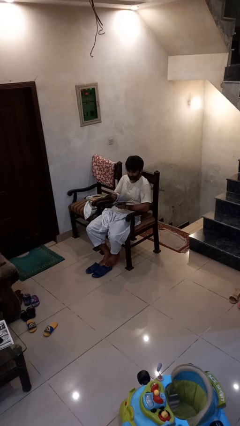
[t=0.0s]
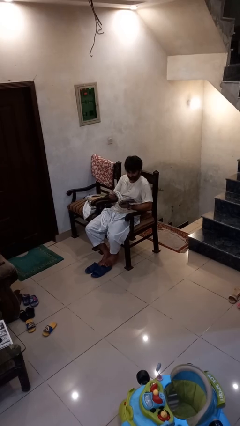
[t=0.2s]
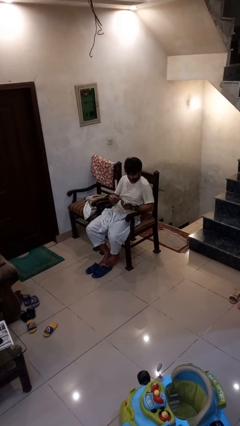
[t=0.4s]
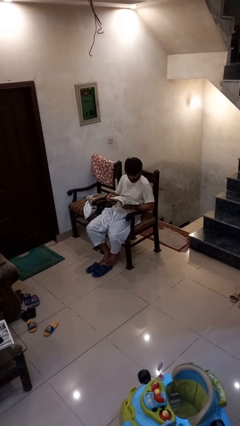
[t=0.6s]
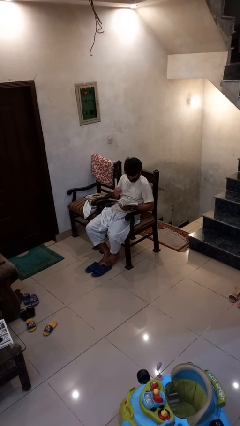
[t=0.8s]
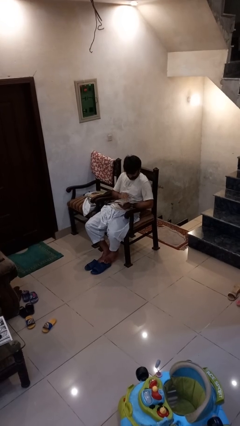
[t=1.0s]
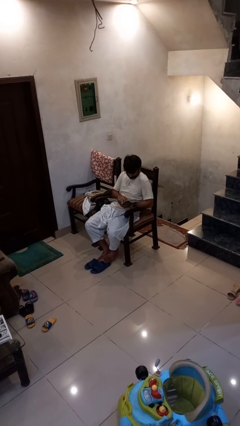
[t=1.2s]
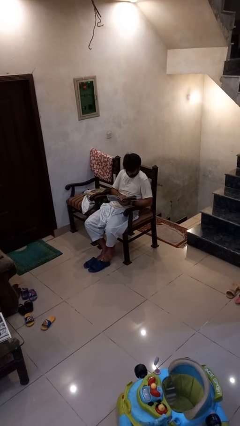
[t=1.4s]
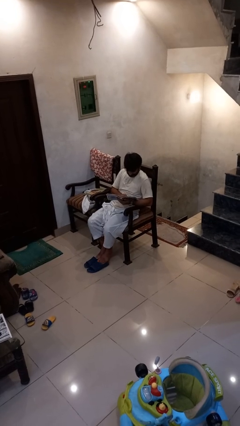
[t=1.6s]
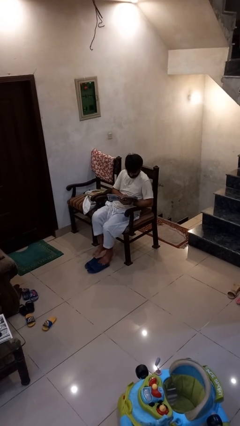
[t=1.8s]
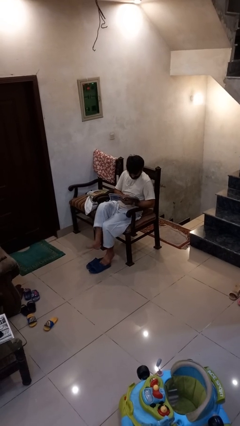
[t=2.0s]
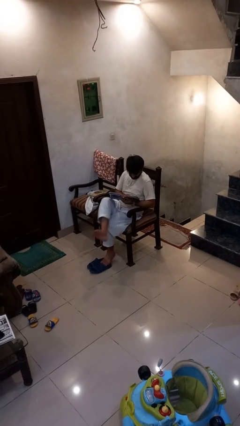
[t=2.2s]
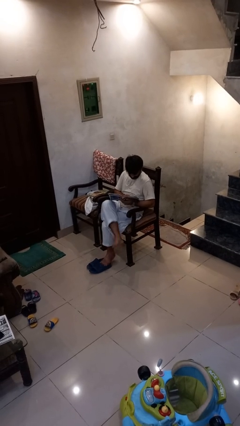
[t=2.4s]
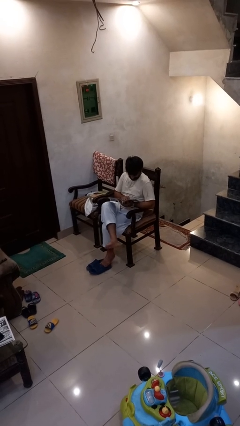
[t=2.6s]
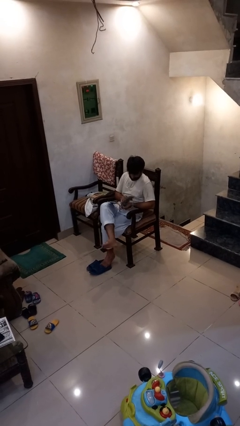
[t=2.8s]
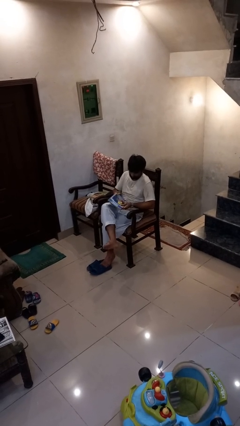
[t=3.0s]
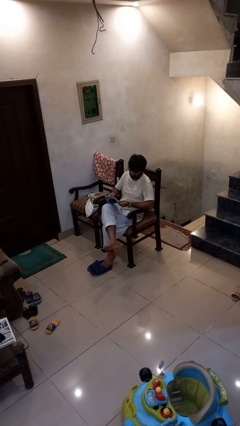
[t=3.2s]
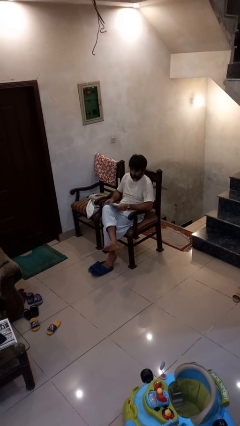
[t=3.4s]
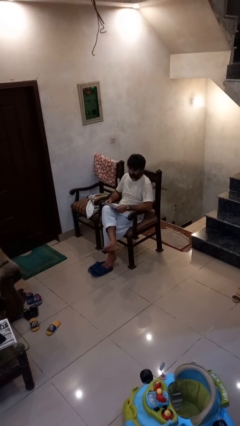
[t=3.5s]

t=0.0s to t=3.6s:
person reads book

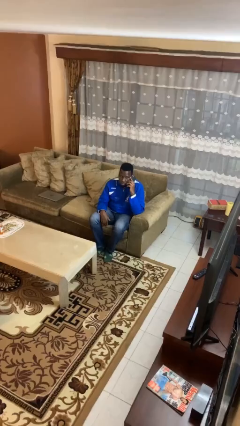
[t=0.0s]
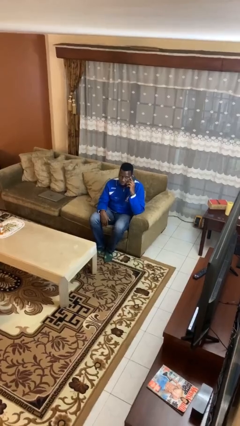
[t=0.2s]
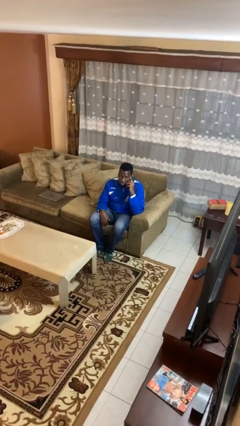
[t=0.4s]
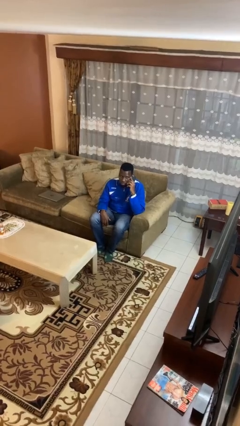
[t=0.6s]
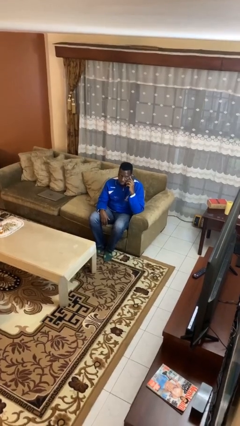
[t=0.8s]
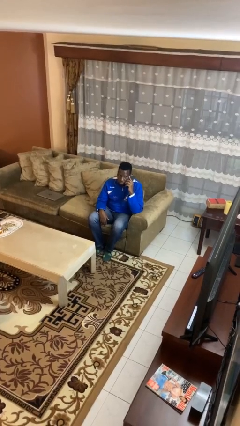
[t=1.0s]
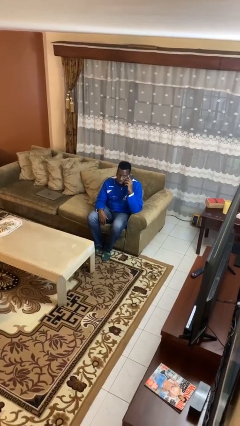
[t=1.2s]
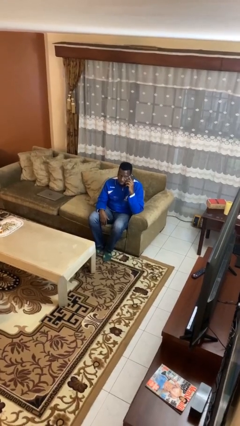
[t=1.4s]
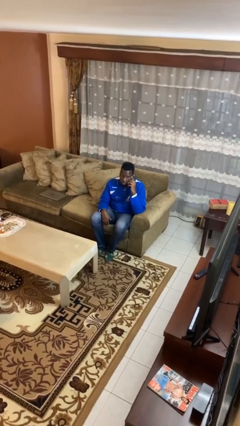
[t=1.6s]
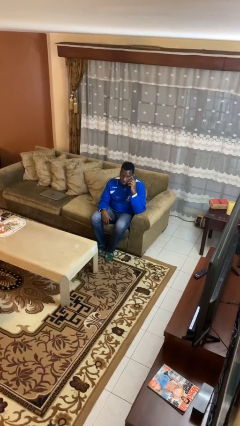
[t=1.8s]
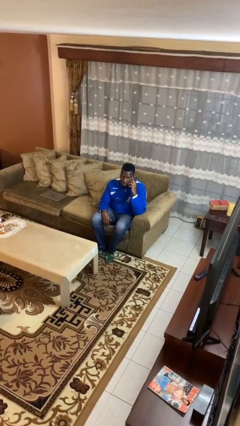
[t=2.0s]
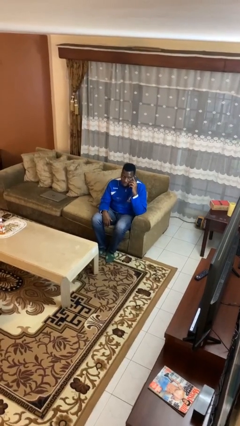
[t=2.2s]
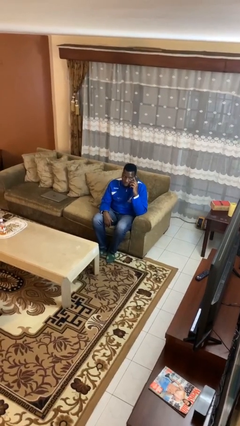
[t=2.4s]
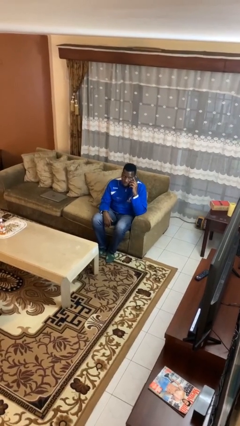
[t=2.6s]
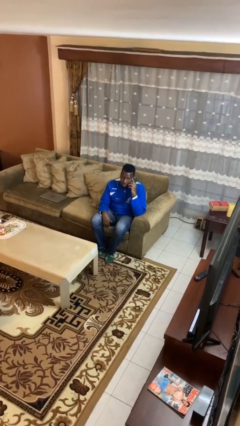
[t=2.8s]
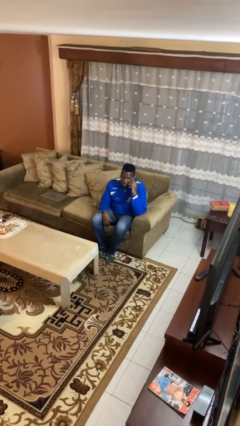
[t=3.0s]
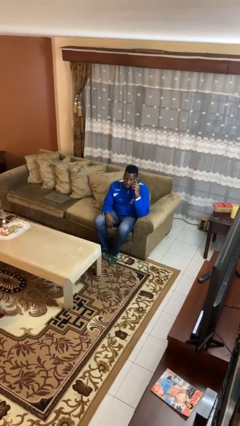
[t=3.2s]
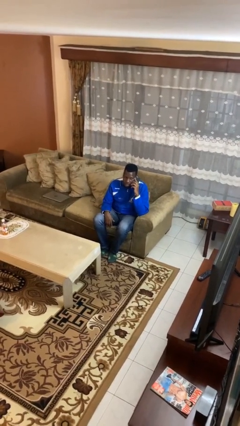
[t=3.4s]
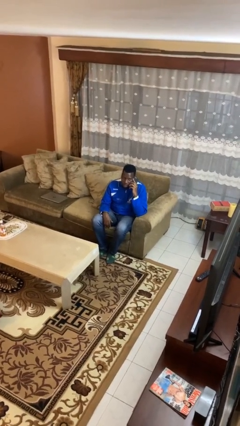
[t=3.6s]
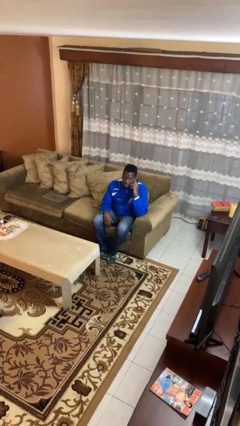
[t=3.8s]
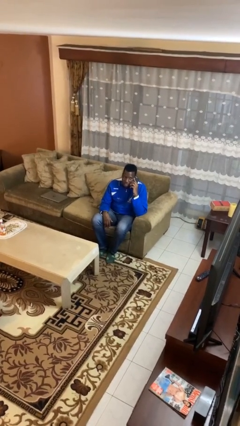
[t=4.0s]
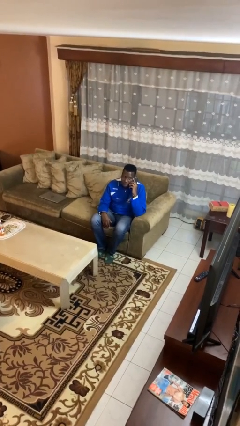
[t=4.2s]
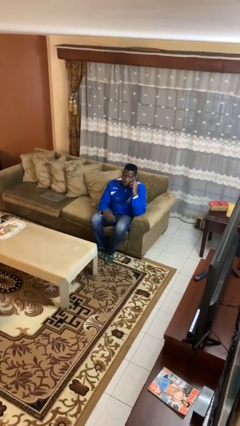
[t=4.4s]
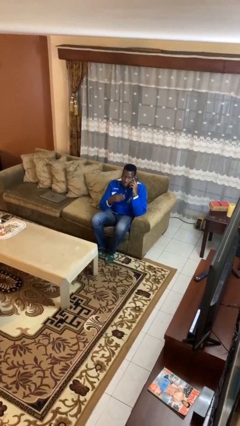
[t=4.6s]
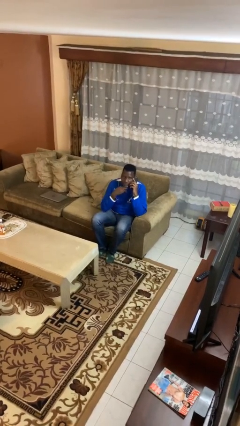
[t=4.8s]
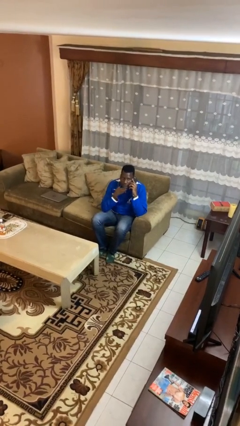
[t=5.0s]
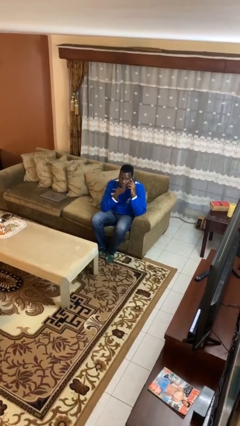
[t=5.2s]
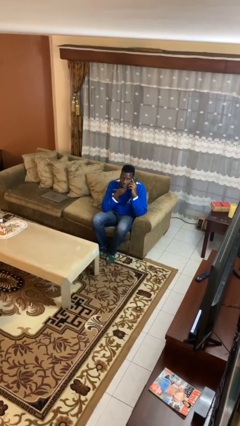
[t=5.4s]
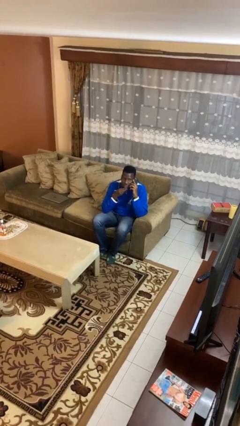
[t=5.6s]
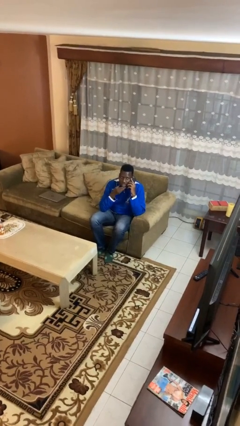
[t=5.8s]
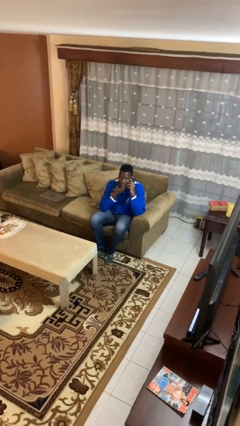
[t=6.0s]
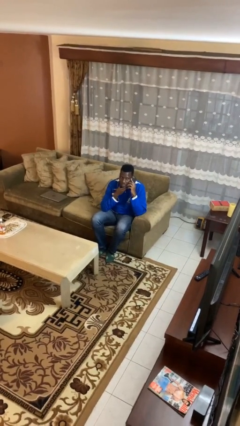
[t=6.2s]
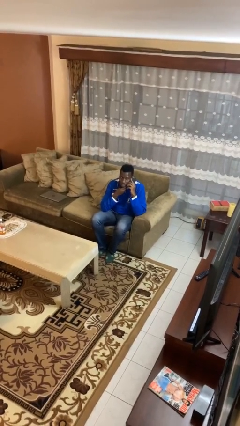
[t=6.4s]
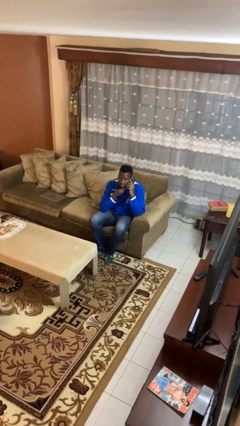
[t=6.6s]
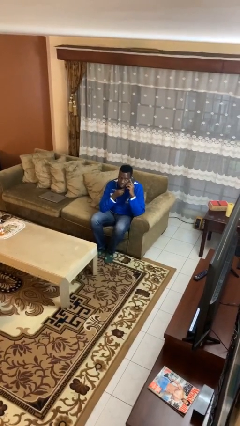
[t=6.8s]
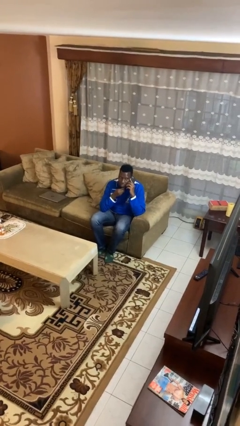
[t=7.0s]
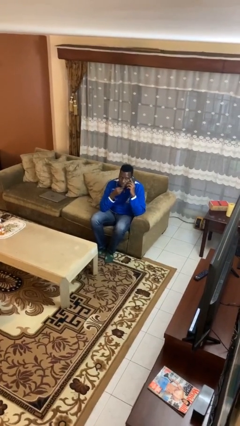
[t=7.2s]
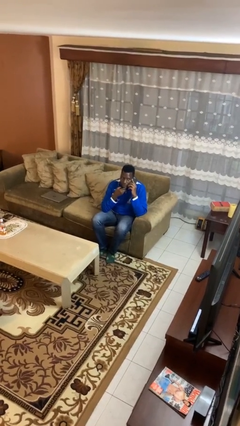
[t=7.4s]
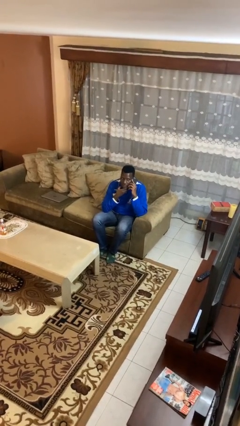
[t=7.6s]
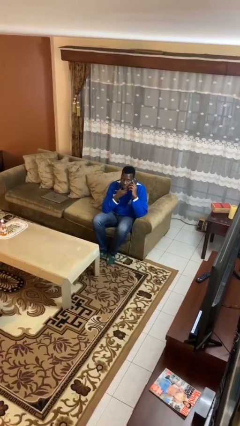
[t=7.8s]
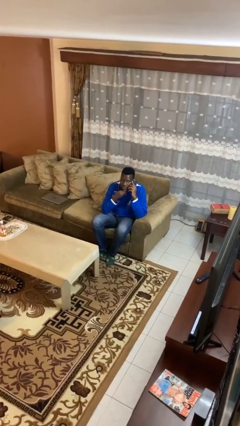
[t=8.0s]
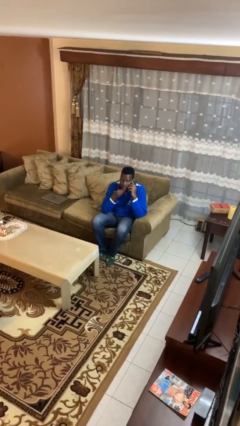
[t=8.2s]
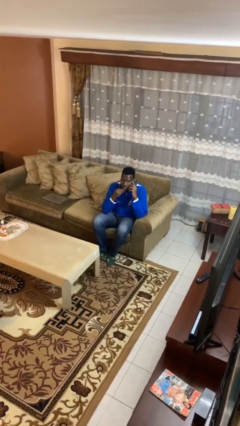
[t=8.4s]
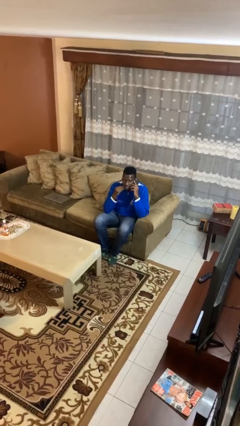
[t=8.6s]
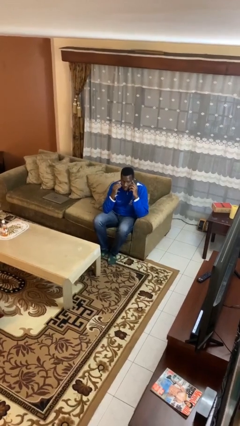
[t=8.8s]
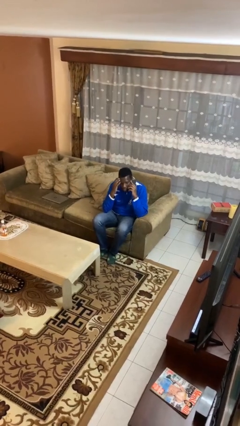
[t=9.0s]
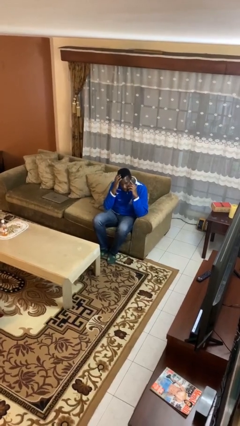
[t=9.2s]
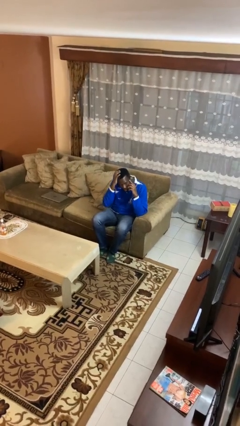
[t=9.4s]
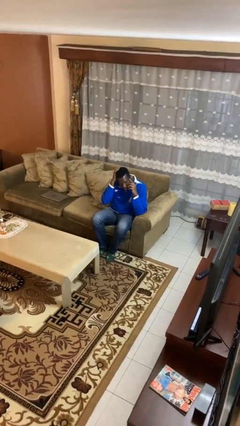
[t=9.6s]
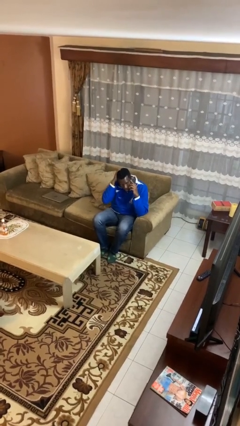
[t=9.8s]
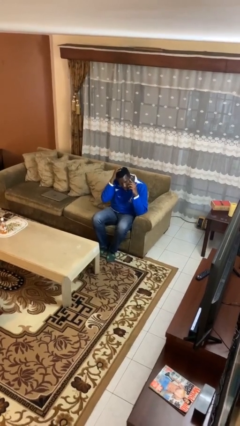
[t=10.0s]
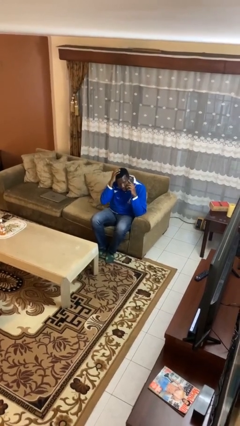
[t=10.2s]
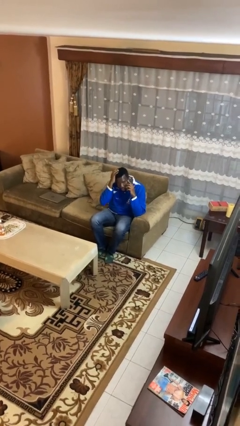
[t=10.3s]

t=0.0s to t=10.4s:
person talks on phone

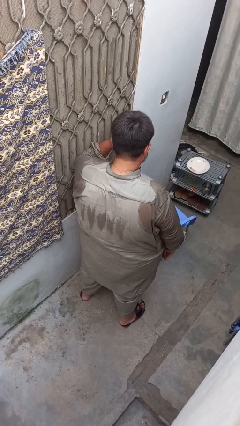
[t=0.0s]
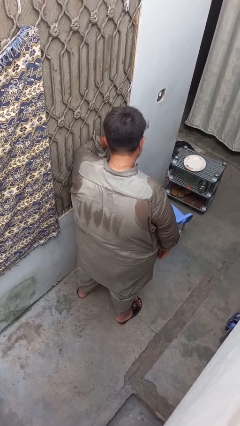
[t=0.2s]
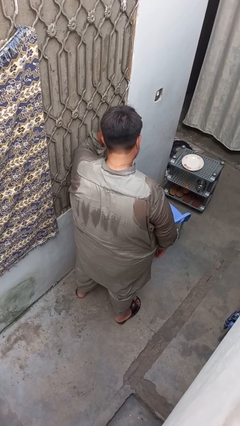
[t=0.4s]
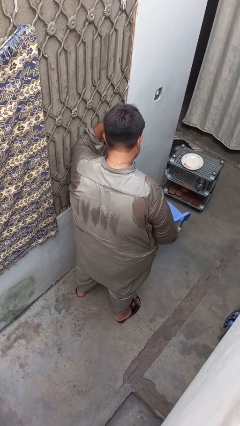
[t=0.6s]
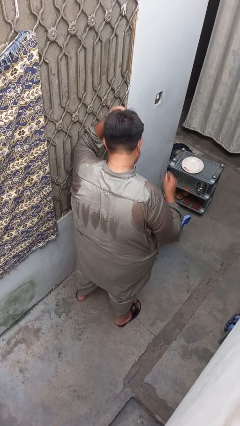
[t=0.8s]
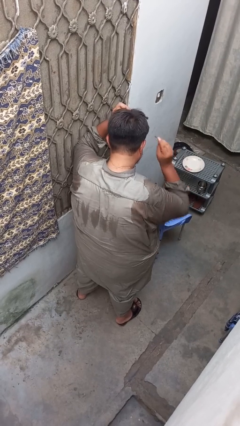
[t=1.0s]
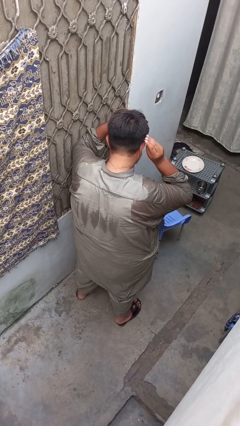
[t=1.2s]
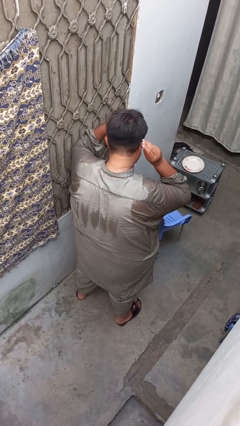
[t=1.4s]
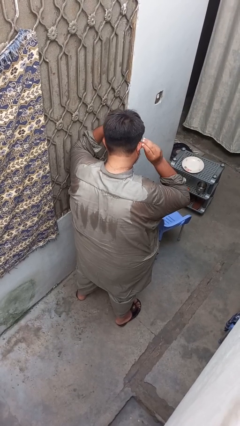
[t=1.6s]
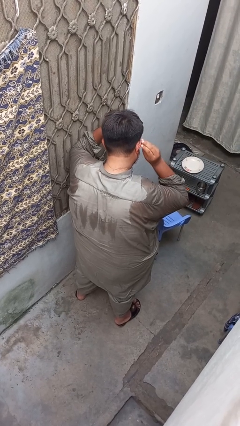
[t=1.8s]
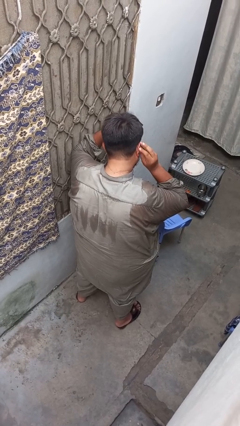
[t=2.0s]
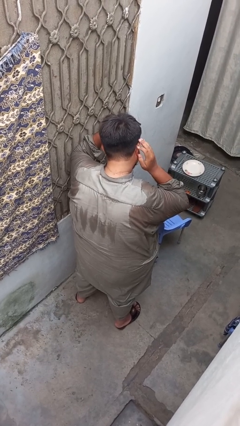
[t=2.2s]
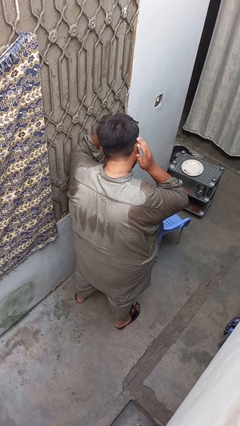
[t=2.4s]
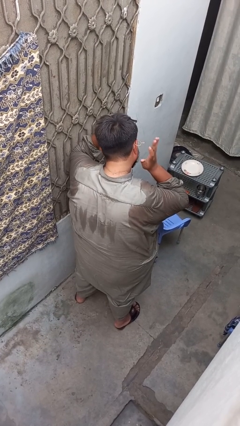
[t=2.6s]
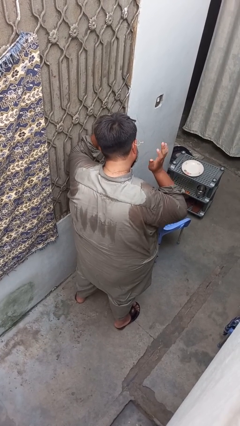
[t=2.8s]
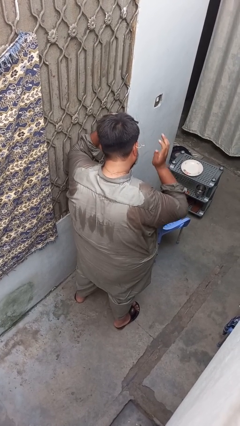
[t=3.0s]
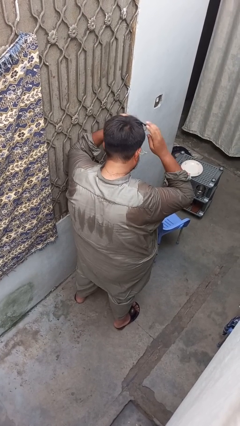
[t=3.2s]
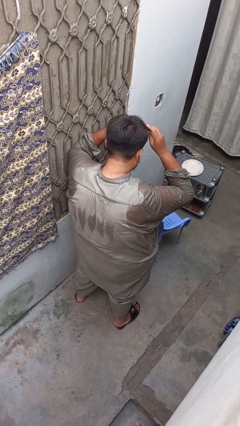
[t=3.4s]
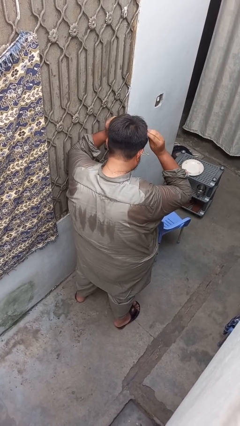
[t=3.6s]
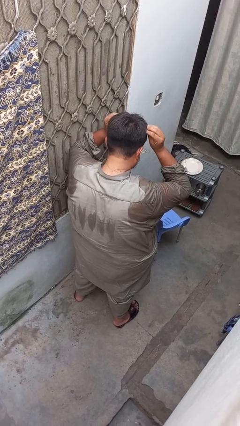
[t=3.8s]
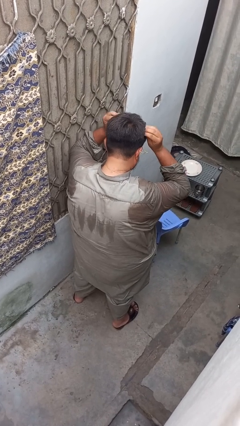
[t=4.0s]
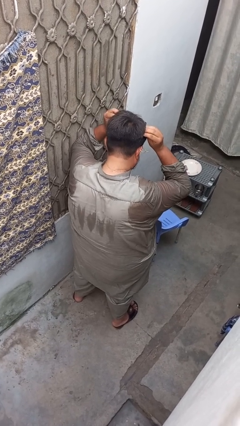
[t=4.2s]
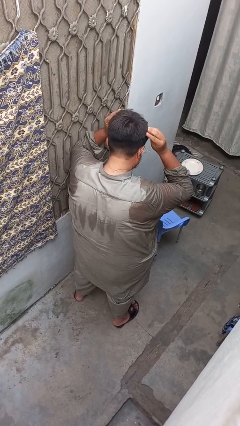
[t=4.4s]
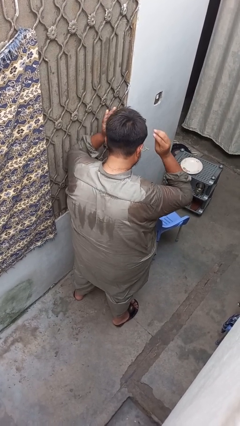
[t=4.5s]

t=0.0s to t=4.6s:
person puts on earrings
